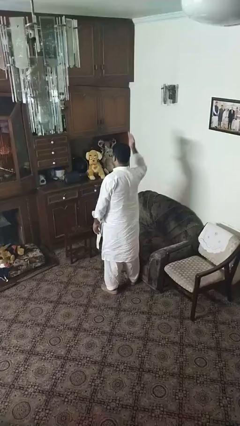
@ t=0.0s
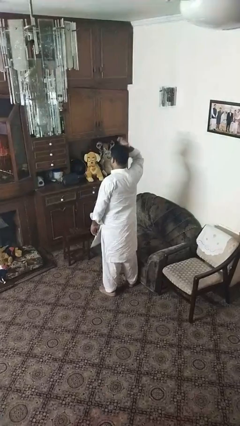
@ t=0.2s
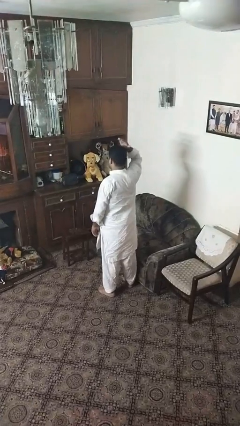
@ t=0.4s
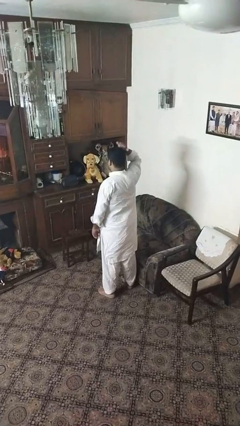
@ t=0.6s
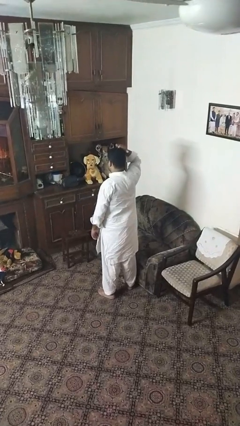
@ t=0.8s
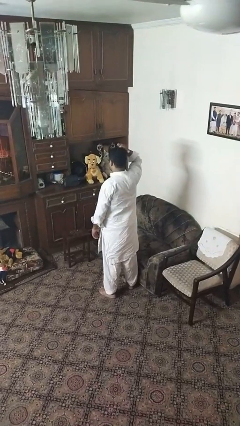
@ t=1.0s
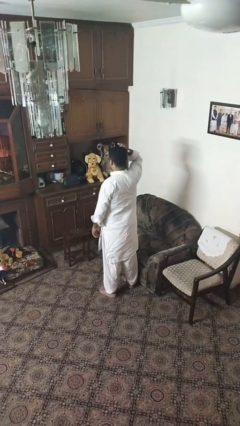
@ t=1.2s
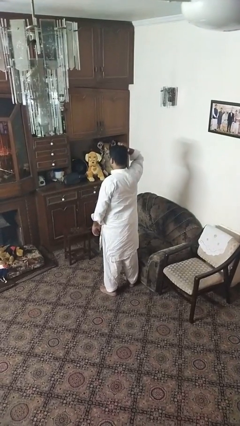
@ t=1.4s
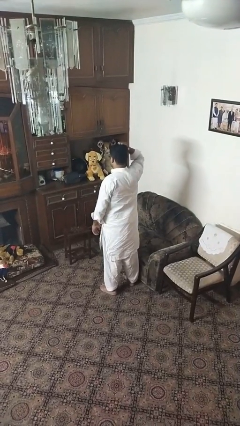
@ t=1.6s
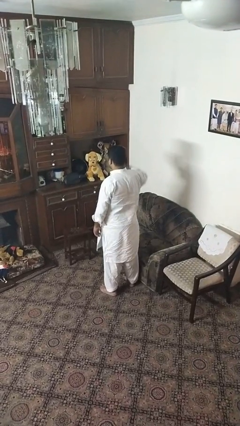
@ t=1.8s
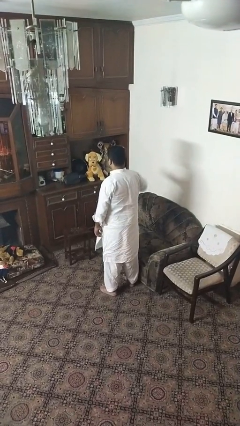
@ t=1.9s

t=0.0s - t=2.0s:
person pats head

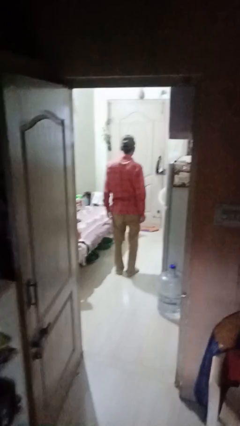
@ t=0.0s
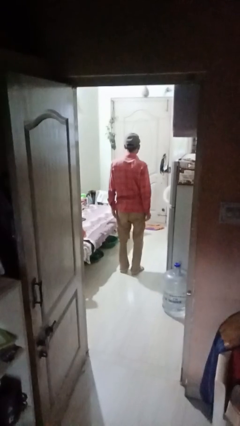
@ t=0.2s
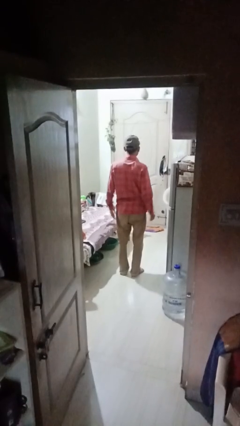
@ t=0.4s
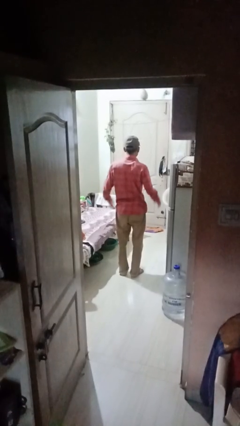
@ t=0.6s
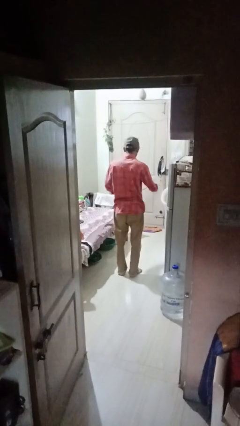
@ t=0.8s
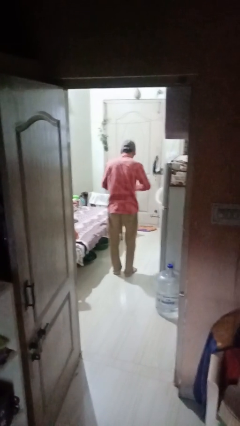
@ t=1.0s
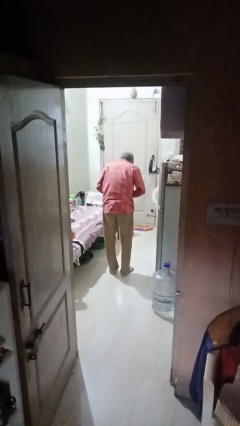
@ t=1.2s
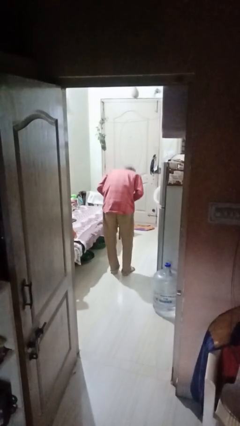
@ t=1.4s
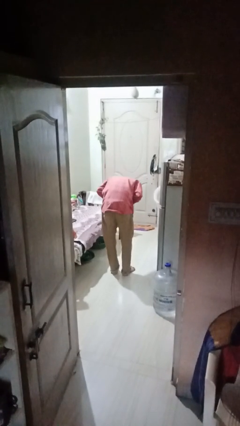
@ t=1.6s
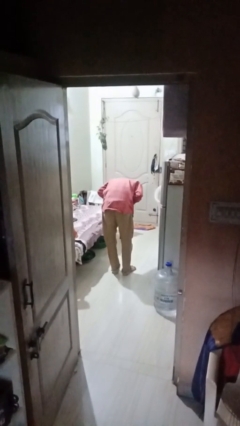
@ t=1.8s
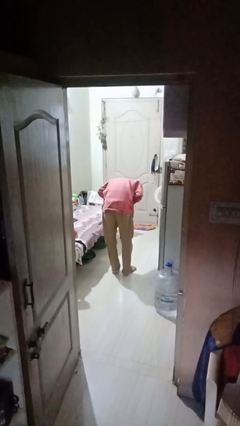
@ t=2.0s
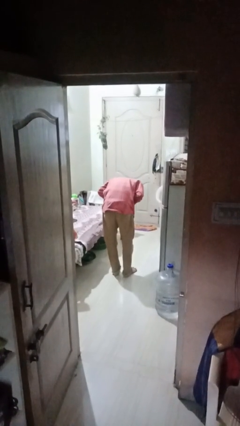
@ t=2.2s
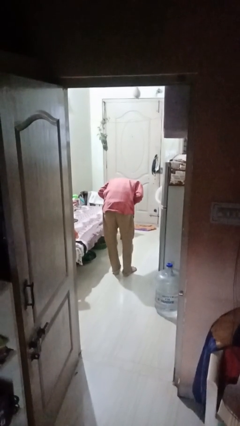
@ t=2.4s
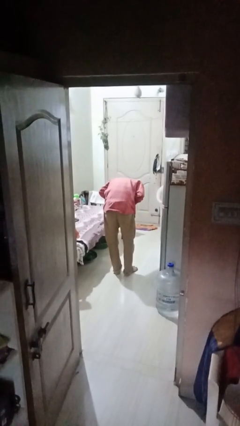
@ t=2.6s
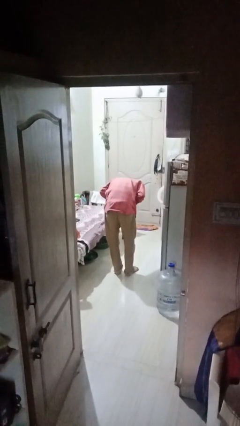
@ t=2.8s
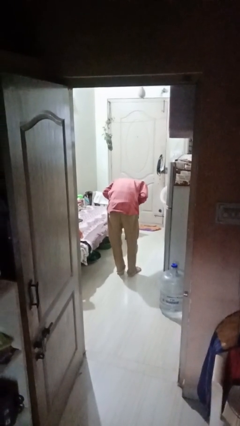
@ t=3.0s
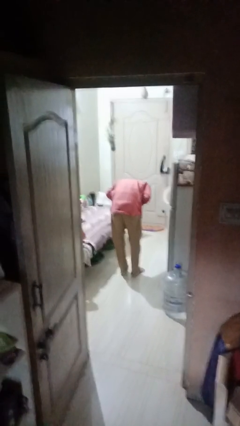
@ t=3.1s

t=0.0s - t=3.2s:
person bows

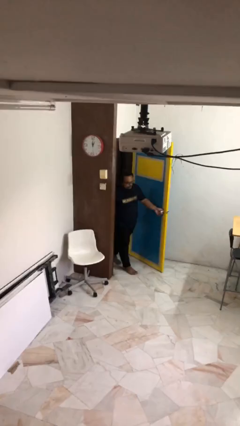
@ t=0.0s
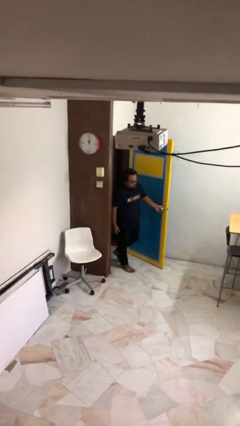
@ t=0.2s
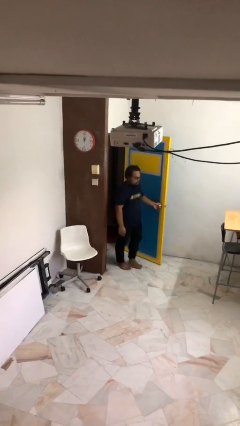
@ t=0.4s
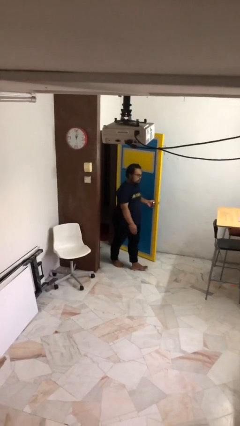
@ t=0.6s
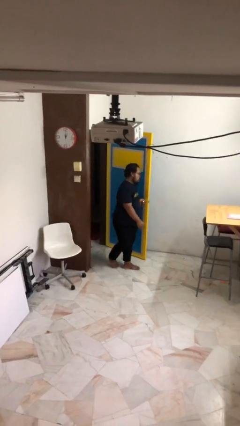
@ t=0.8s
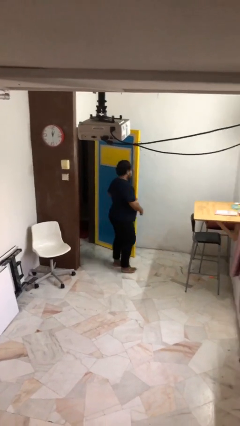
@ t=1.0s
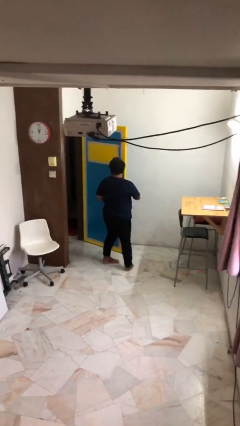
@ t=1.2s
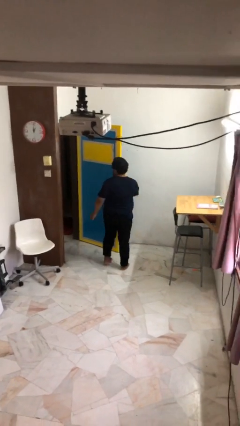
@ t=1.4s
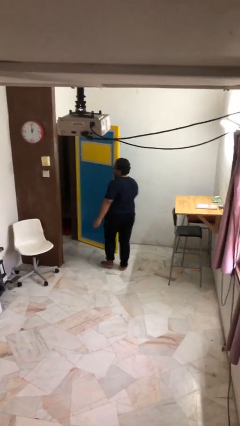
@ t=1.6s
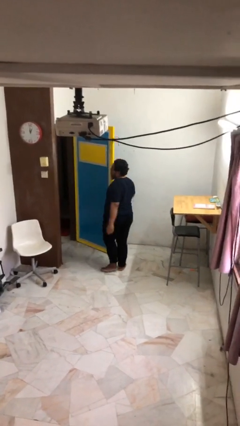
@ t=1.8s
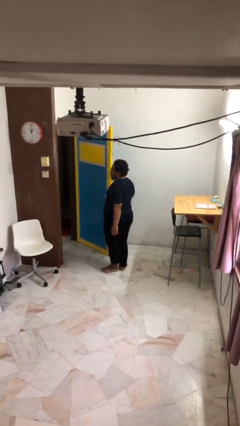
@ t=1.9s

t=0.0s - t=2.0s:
person enters scene through structure

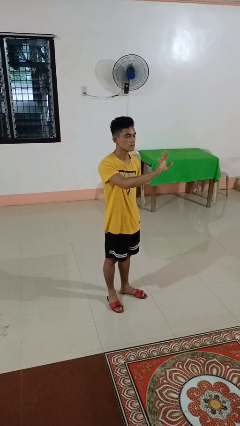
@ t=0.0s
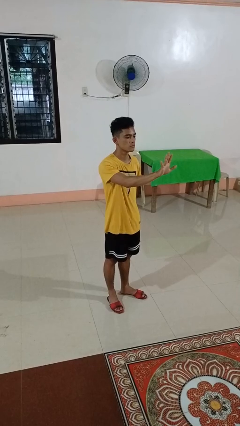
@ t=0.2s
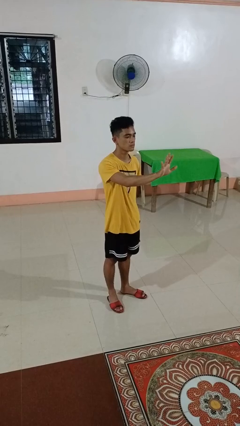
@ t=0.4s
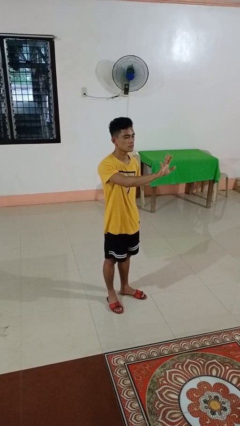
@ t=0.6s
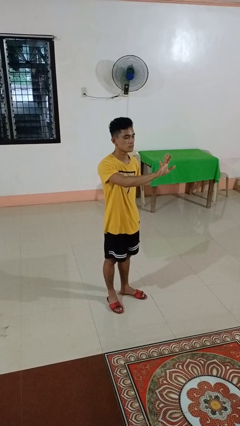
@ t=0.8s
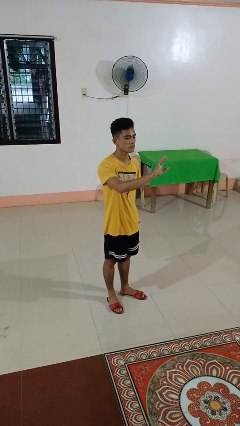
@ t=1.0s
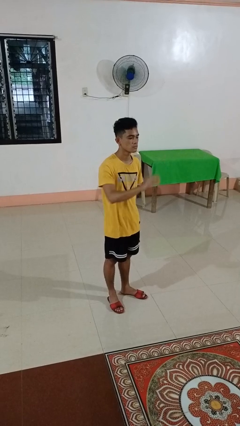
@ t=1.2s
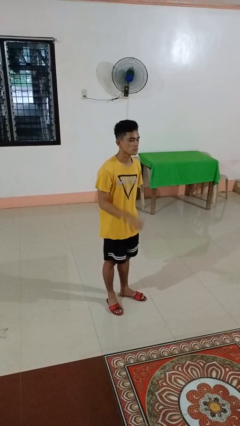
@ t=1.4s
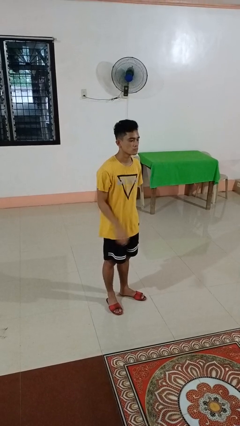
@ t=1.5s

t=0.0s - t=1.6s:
person gestures number five

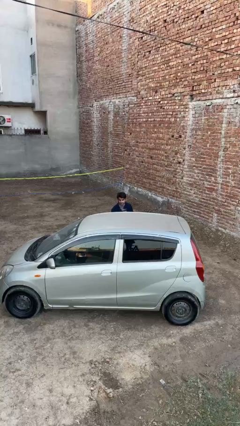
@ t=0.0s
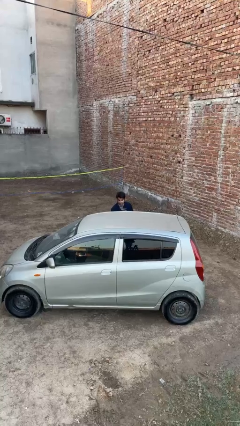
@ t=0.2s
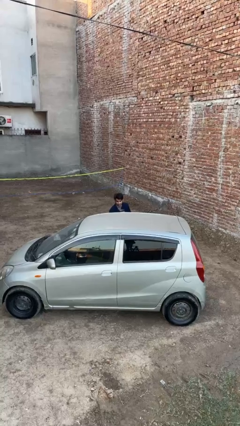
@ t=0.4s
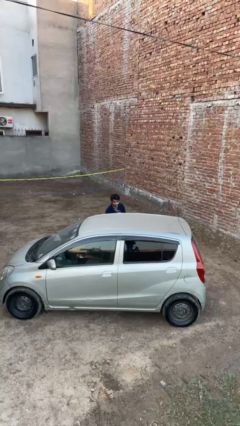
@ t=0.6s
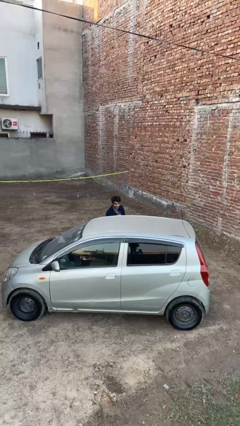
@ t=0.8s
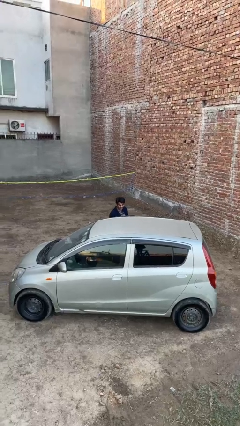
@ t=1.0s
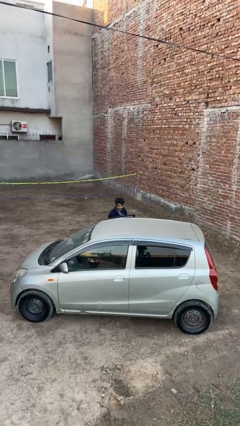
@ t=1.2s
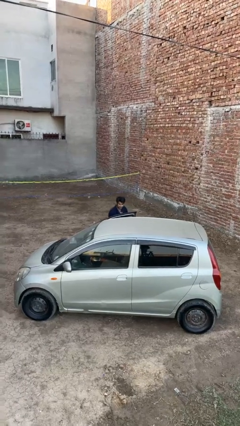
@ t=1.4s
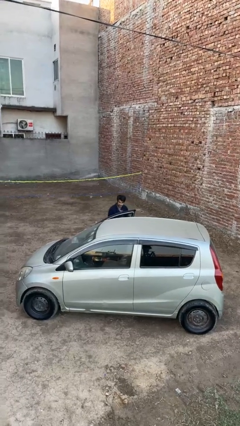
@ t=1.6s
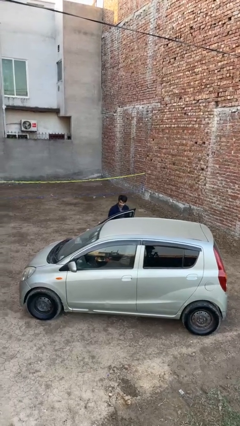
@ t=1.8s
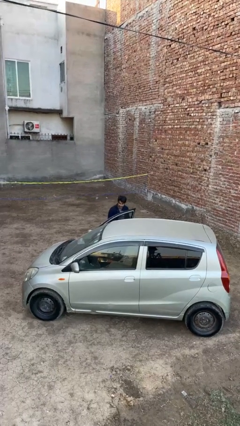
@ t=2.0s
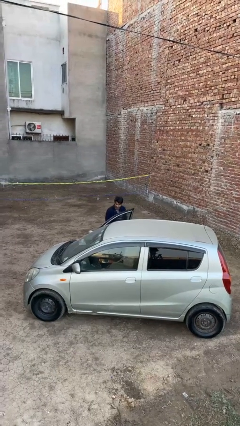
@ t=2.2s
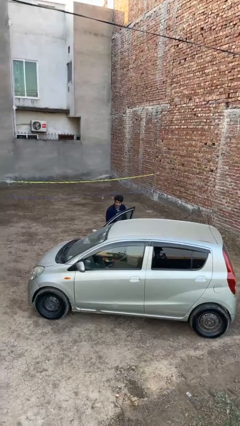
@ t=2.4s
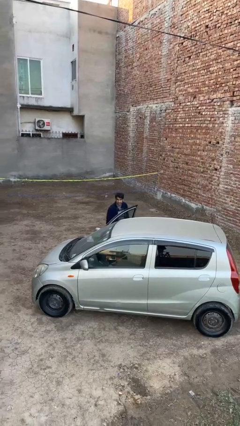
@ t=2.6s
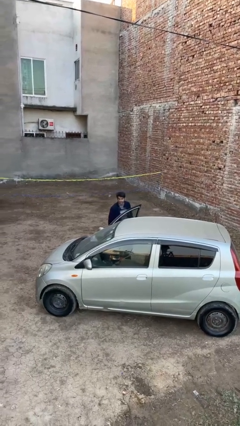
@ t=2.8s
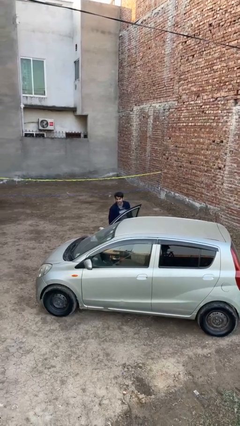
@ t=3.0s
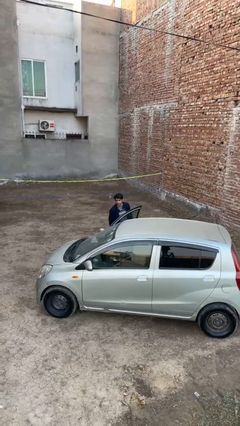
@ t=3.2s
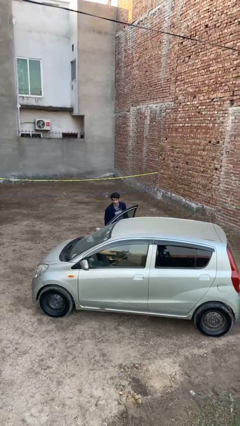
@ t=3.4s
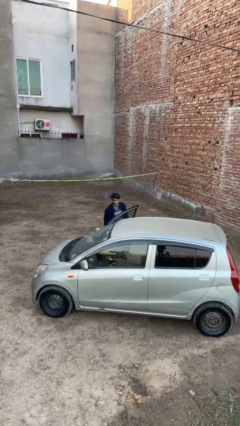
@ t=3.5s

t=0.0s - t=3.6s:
person opens car door

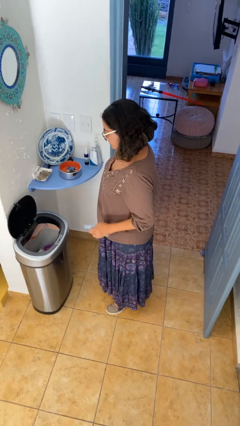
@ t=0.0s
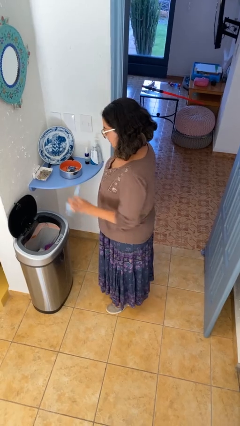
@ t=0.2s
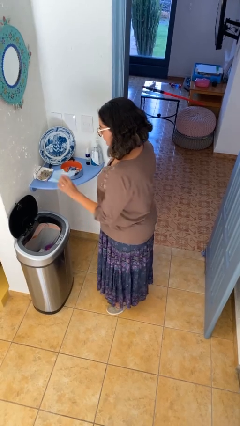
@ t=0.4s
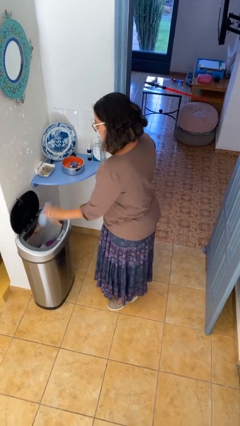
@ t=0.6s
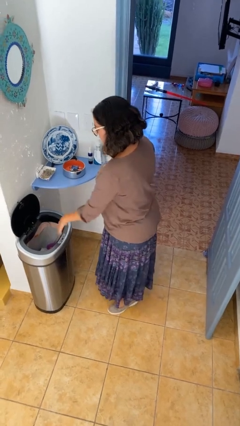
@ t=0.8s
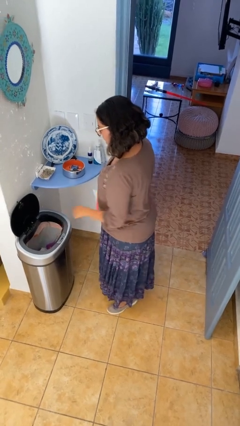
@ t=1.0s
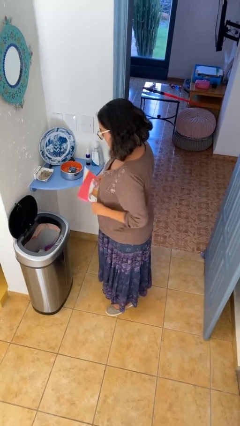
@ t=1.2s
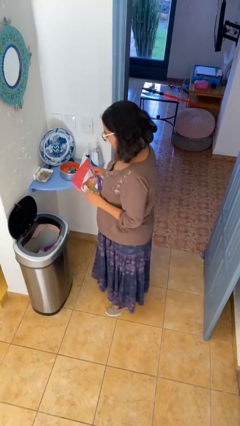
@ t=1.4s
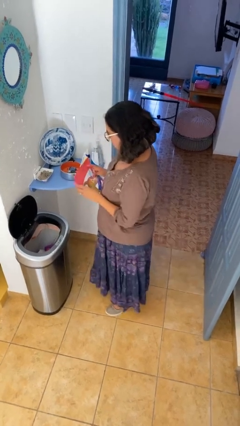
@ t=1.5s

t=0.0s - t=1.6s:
person discards trash

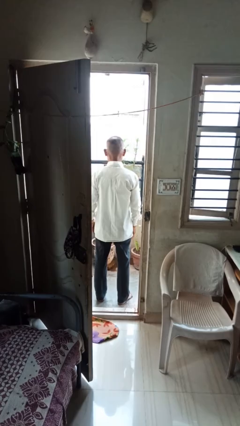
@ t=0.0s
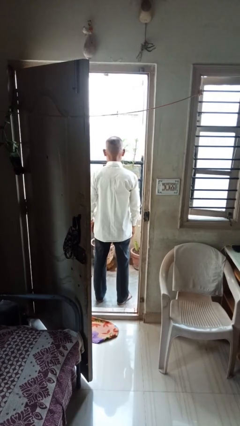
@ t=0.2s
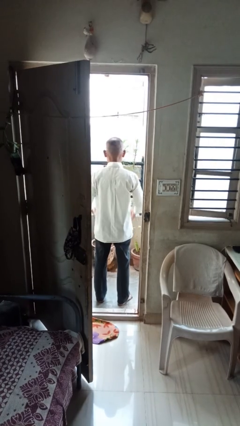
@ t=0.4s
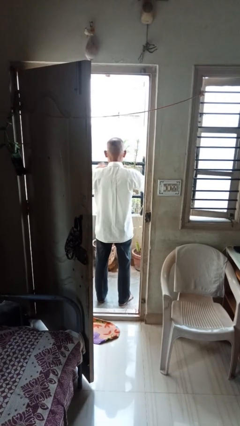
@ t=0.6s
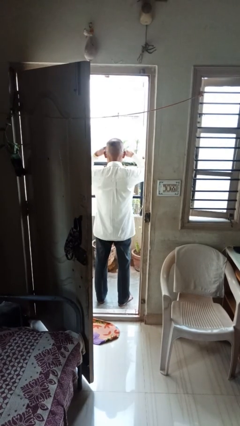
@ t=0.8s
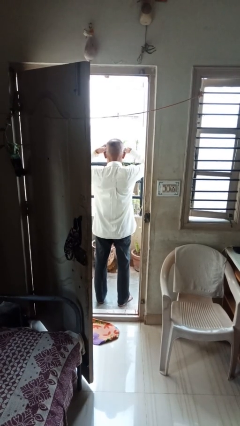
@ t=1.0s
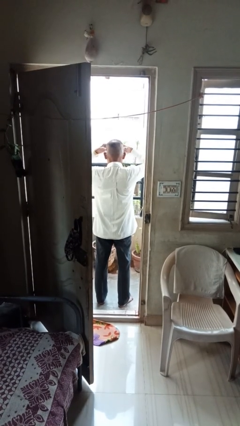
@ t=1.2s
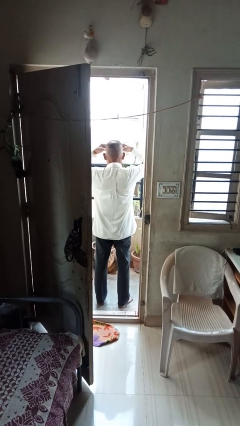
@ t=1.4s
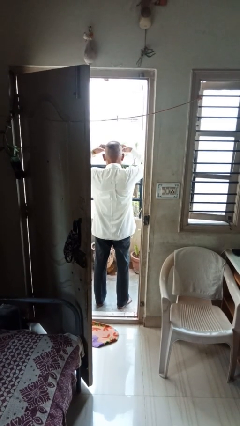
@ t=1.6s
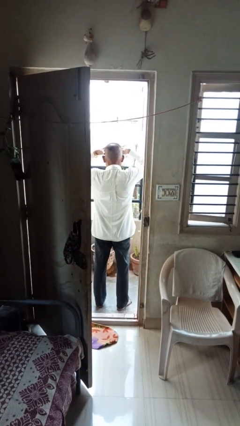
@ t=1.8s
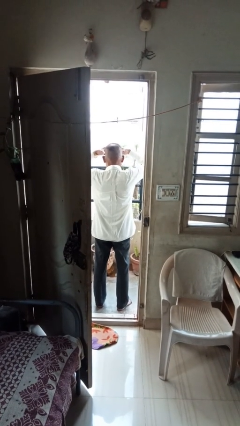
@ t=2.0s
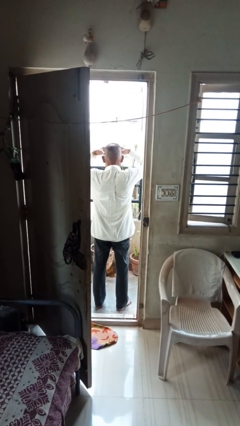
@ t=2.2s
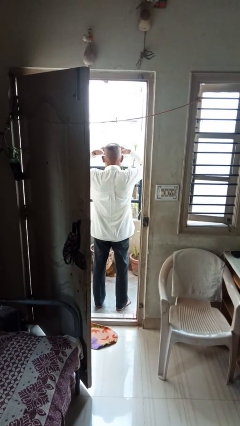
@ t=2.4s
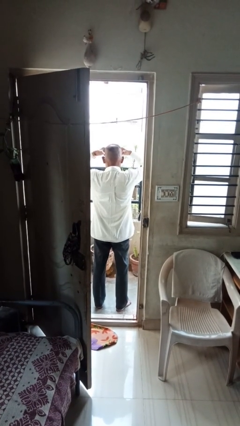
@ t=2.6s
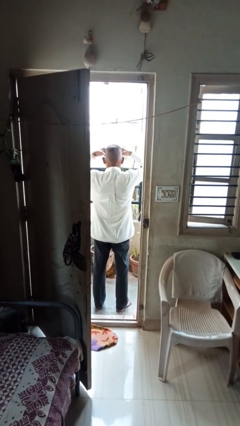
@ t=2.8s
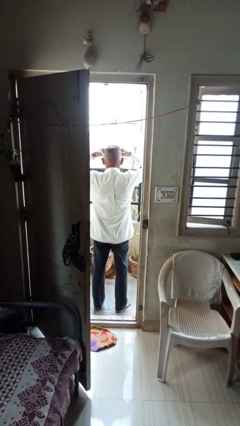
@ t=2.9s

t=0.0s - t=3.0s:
person shades eyes
